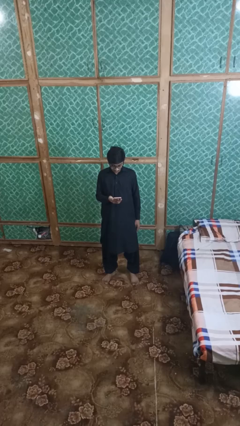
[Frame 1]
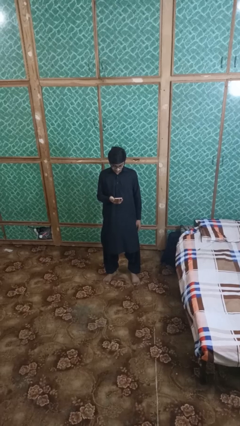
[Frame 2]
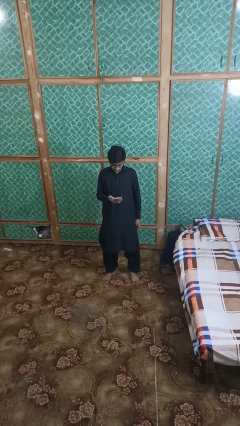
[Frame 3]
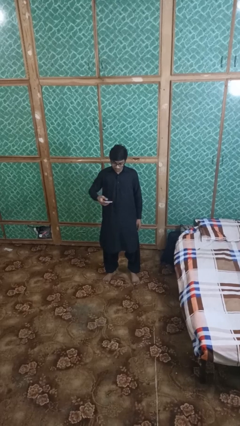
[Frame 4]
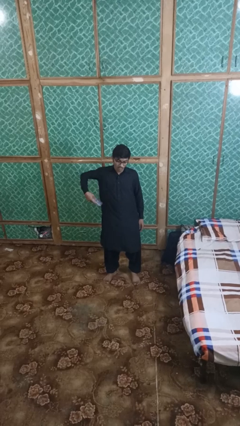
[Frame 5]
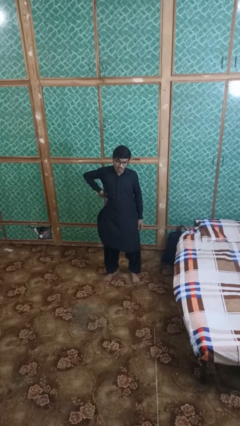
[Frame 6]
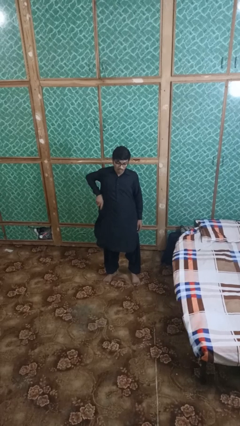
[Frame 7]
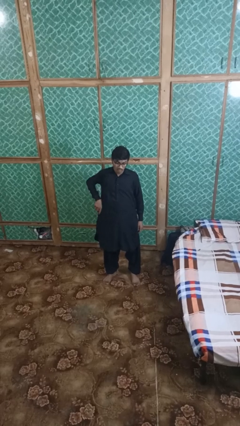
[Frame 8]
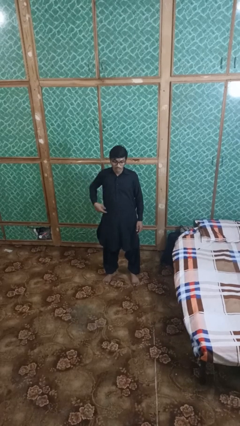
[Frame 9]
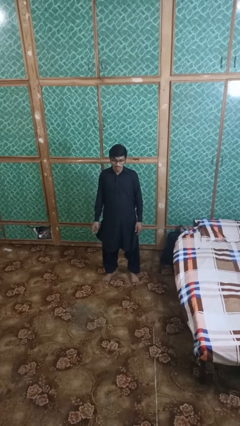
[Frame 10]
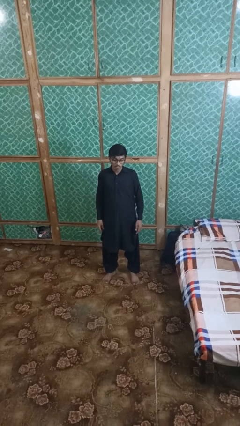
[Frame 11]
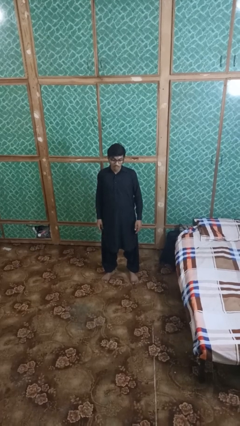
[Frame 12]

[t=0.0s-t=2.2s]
person puts phone into pocket

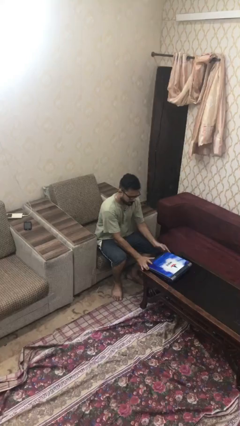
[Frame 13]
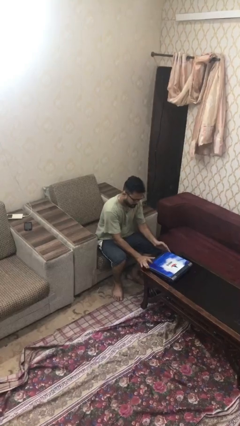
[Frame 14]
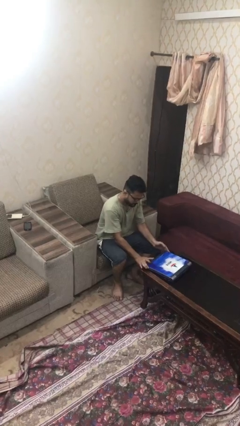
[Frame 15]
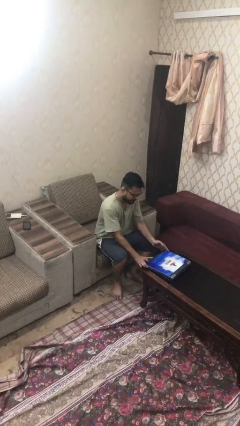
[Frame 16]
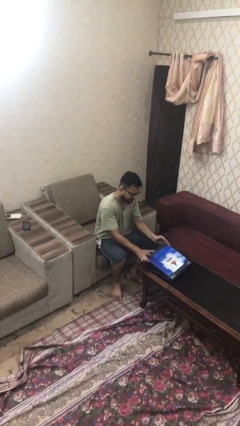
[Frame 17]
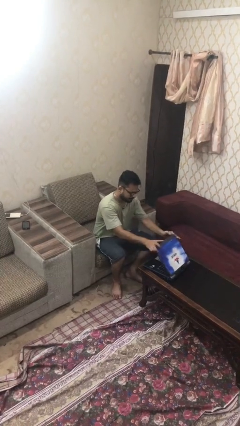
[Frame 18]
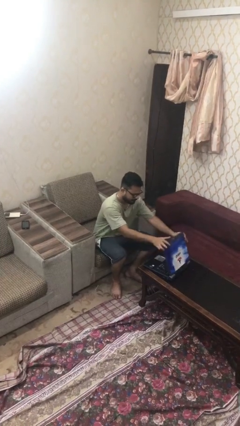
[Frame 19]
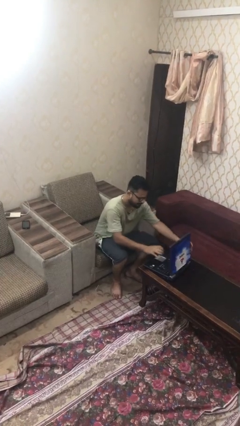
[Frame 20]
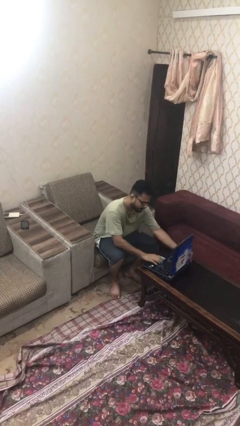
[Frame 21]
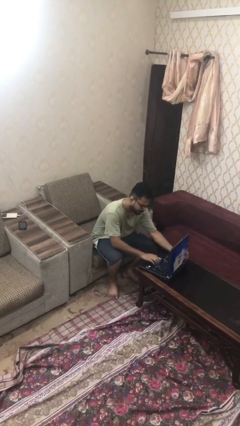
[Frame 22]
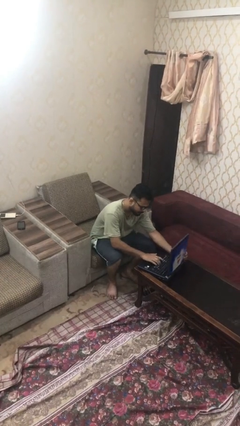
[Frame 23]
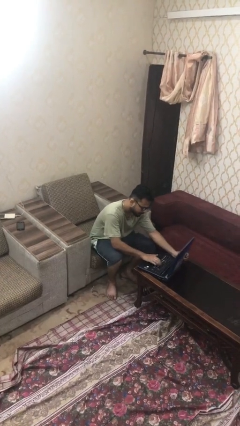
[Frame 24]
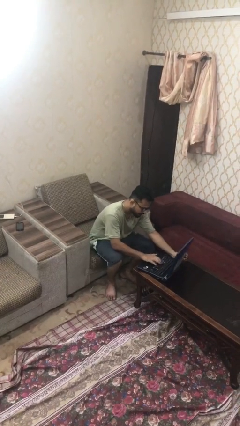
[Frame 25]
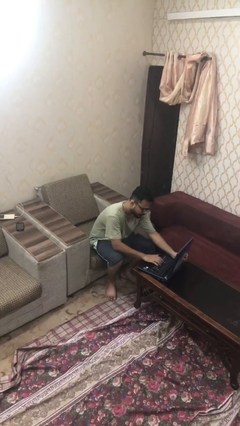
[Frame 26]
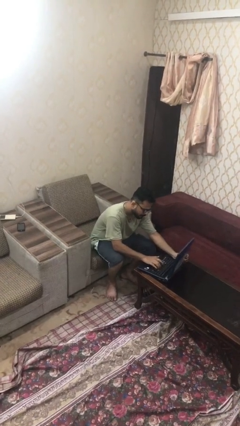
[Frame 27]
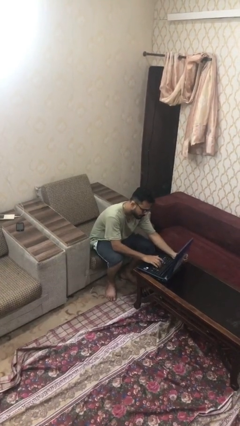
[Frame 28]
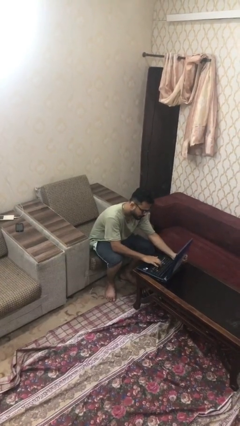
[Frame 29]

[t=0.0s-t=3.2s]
person interacts with laptop

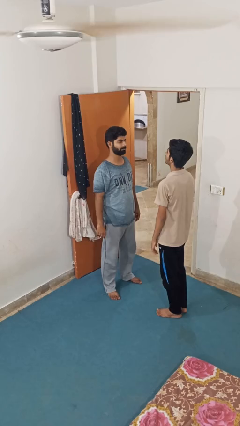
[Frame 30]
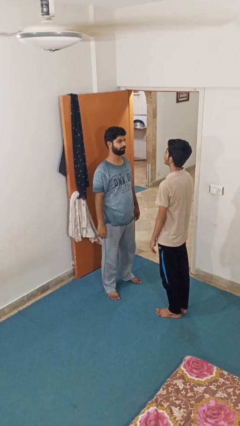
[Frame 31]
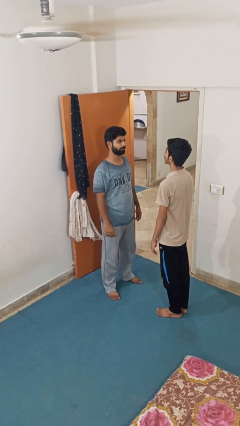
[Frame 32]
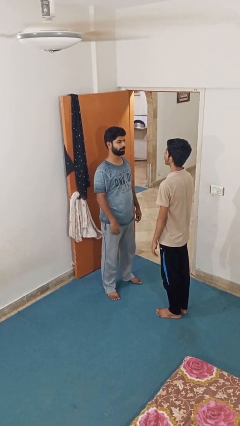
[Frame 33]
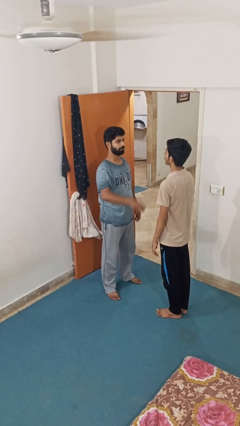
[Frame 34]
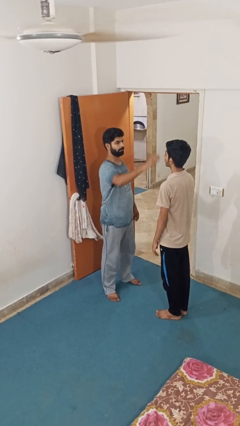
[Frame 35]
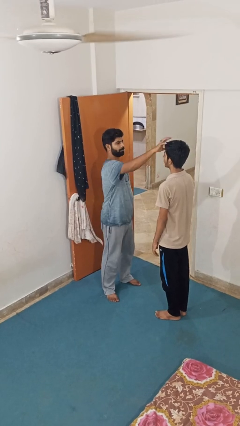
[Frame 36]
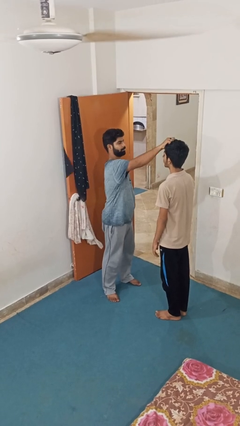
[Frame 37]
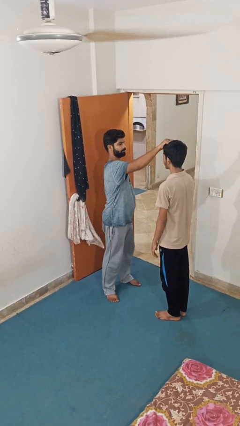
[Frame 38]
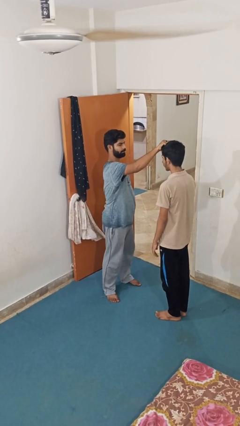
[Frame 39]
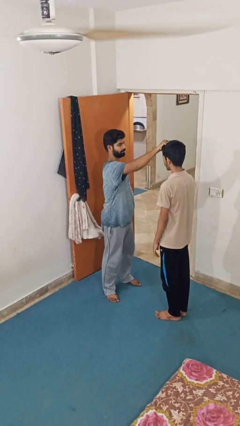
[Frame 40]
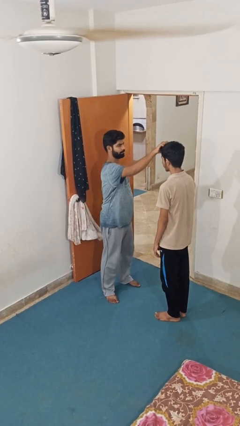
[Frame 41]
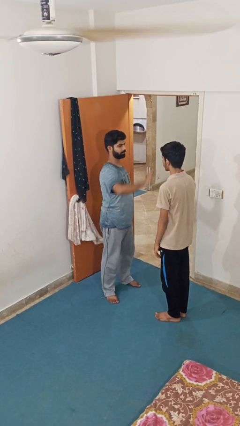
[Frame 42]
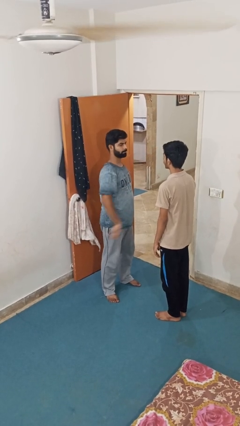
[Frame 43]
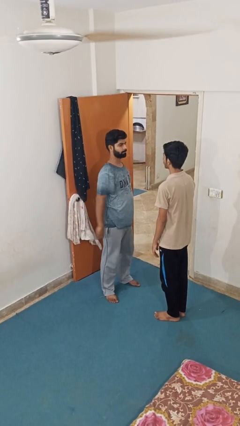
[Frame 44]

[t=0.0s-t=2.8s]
person grabs person by hair

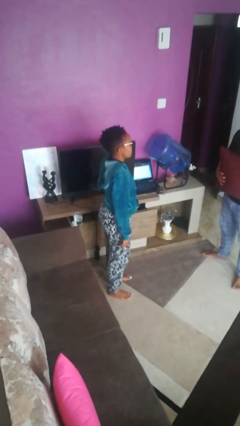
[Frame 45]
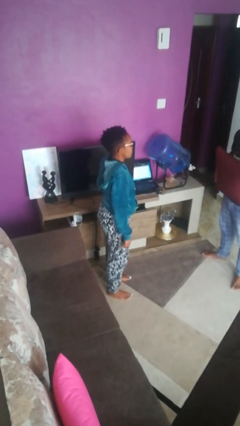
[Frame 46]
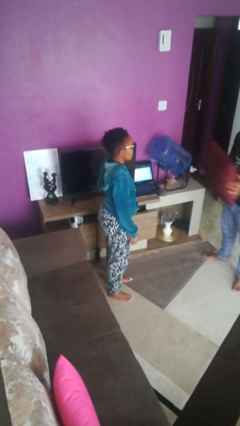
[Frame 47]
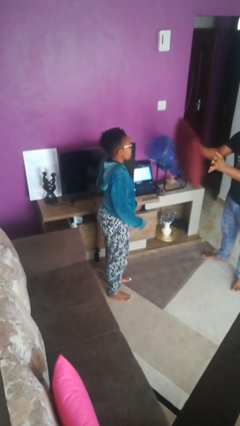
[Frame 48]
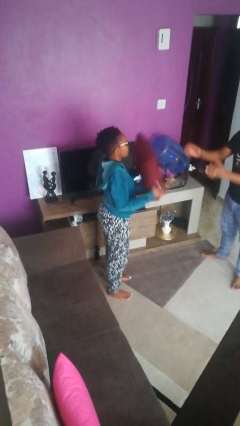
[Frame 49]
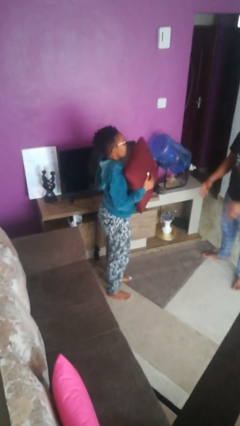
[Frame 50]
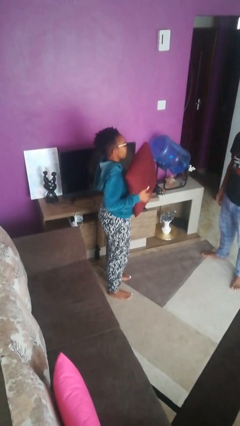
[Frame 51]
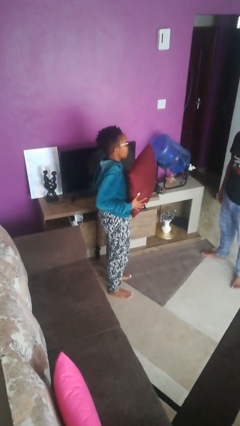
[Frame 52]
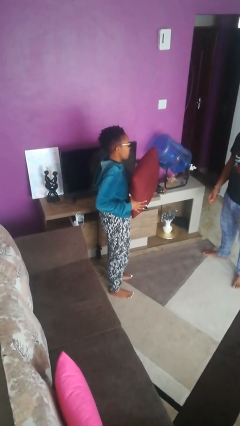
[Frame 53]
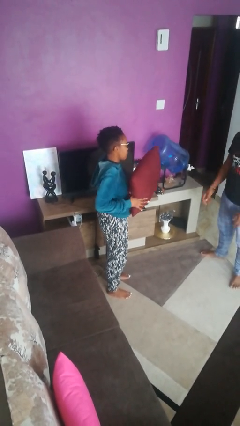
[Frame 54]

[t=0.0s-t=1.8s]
person catches object from person

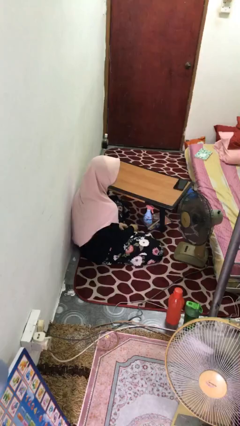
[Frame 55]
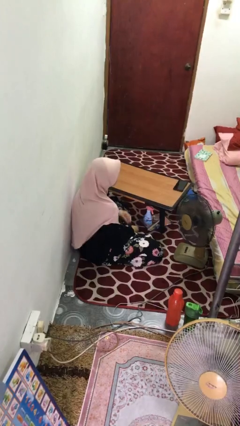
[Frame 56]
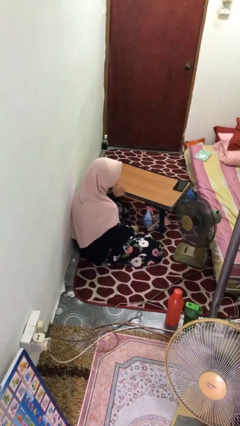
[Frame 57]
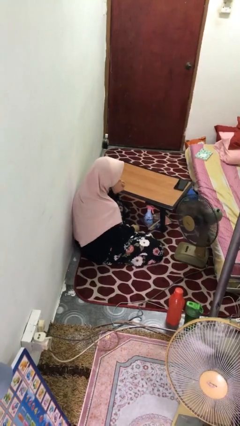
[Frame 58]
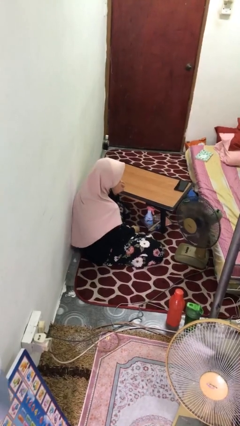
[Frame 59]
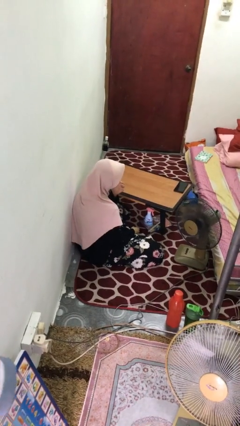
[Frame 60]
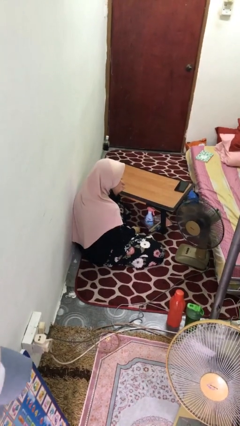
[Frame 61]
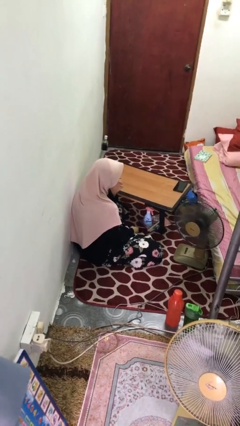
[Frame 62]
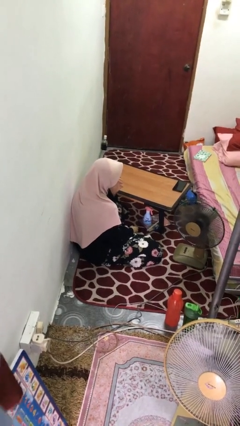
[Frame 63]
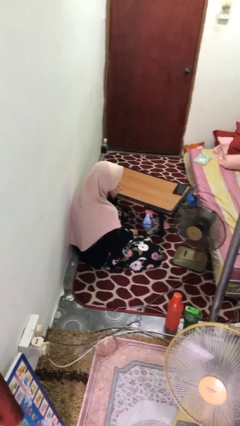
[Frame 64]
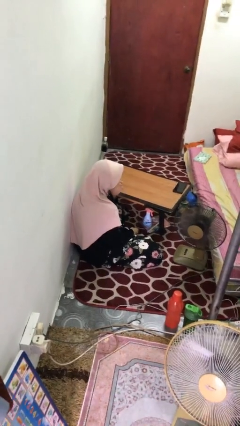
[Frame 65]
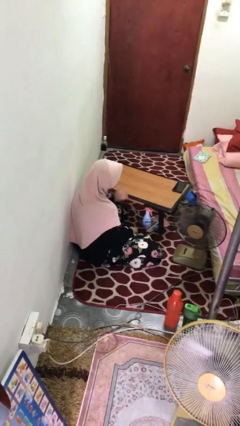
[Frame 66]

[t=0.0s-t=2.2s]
person licks fingers

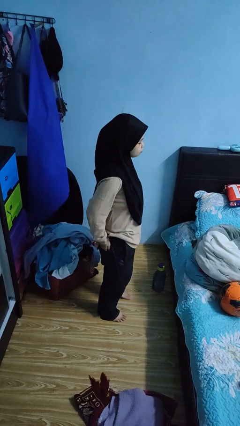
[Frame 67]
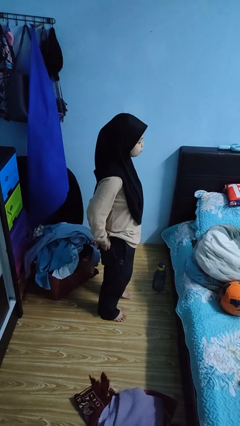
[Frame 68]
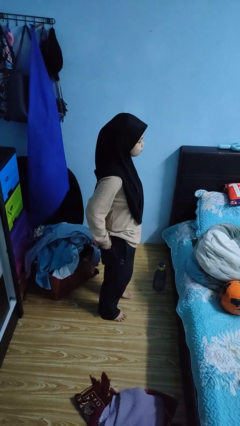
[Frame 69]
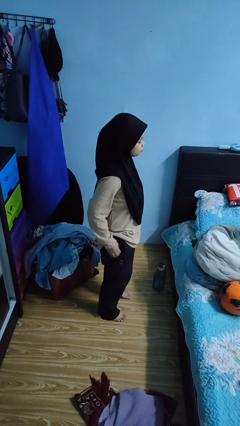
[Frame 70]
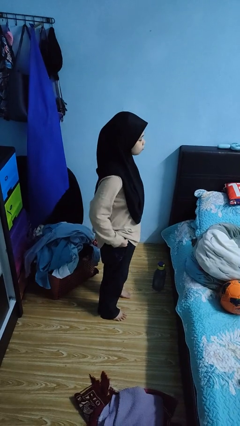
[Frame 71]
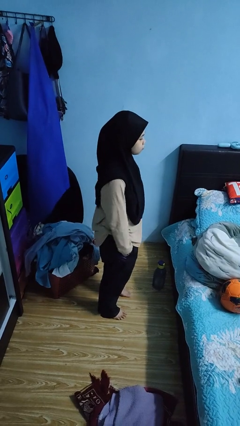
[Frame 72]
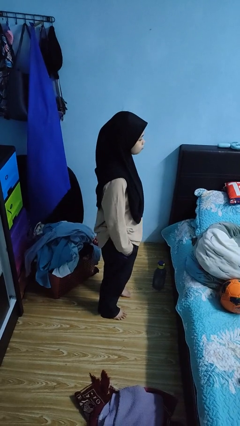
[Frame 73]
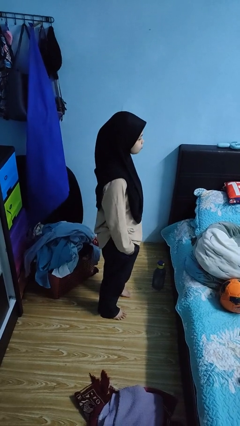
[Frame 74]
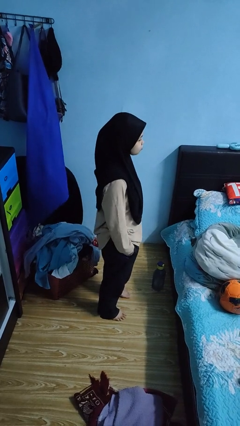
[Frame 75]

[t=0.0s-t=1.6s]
person puts hands in back pockets

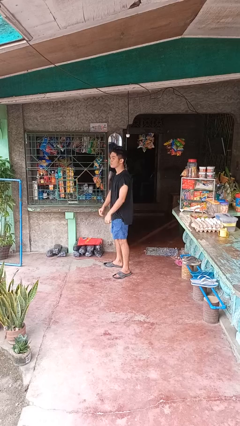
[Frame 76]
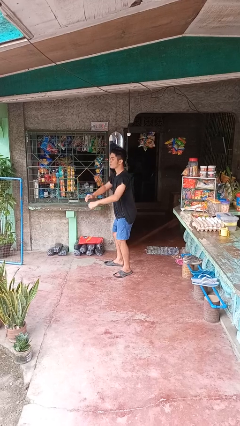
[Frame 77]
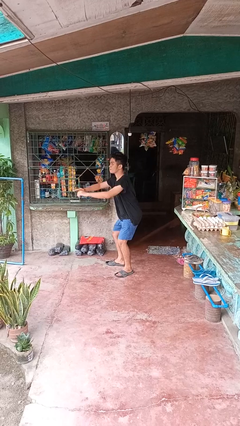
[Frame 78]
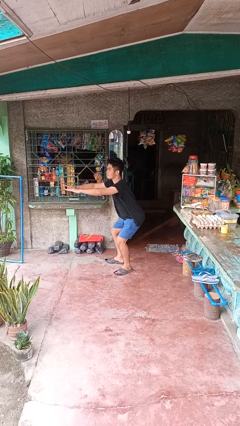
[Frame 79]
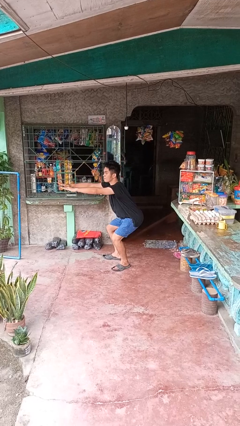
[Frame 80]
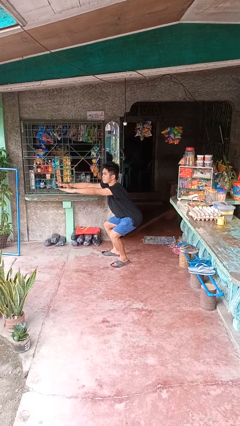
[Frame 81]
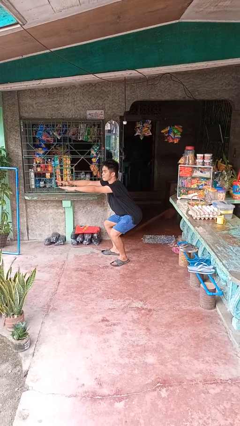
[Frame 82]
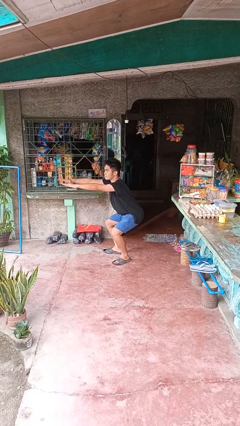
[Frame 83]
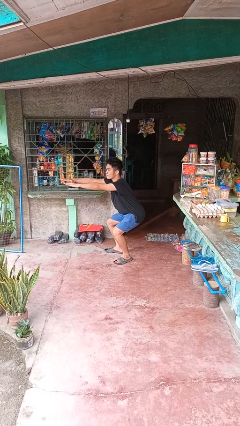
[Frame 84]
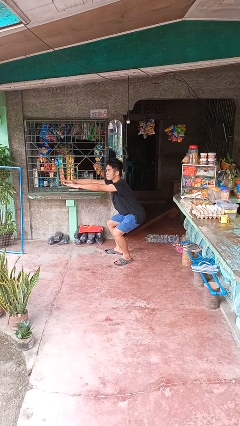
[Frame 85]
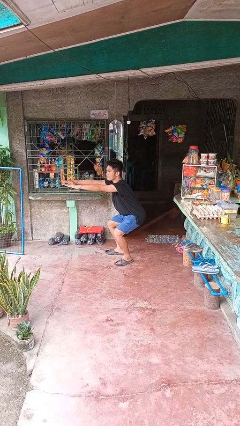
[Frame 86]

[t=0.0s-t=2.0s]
person squats

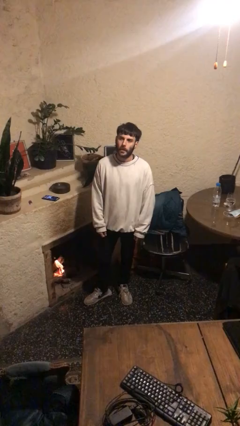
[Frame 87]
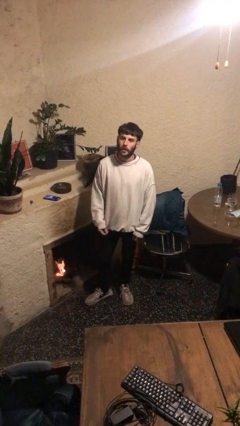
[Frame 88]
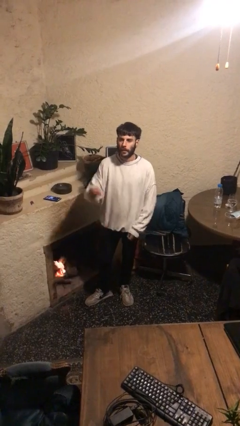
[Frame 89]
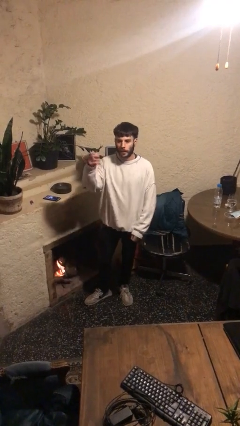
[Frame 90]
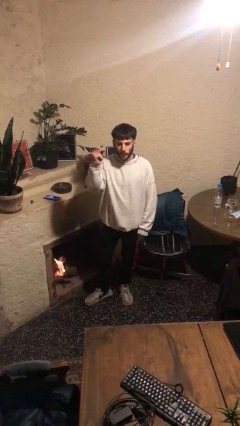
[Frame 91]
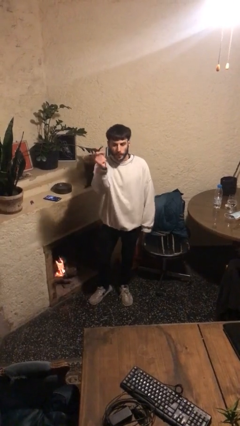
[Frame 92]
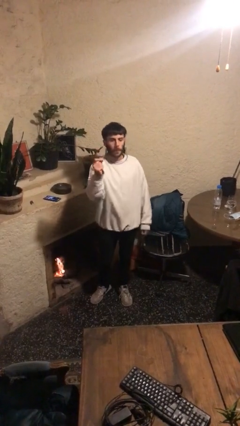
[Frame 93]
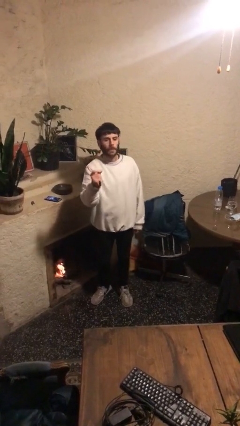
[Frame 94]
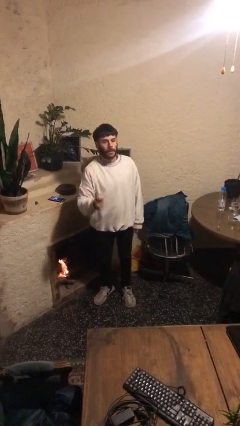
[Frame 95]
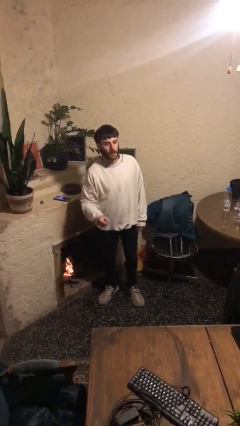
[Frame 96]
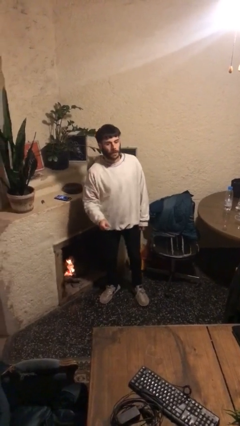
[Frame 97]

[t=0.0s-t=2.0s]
person snaps fingers
